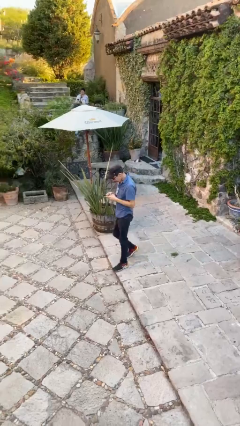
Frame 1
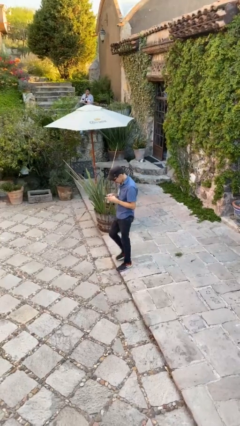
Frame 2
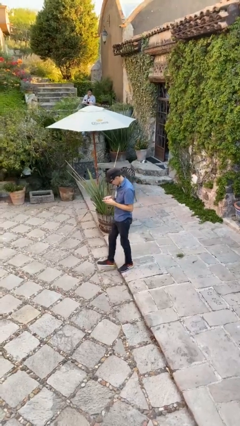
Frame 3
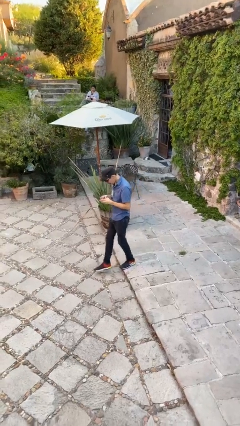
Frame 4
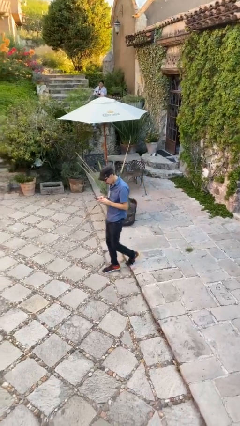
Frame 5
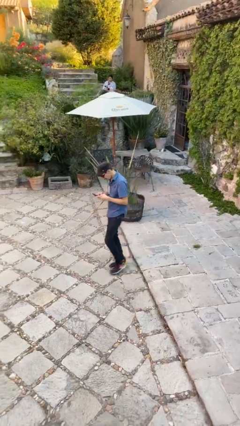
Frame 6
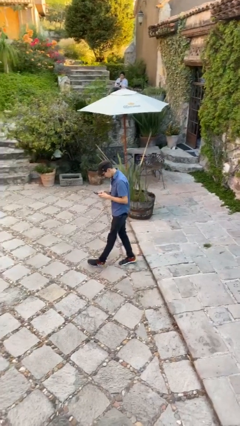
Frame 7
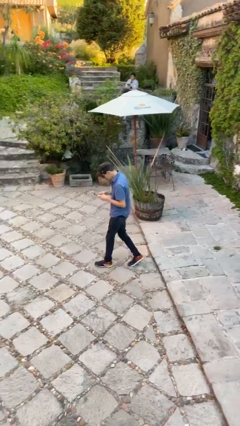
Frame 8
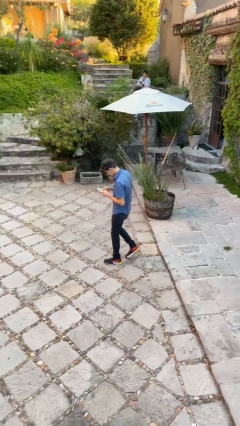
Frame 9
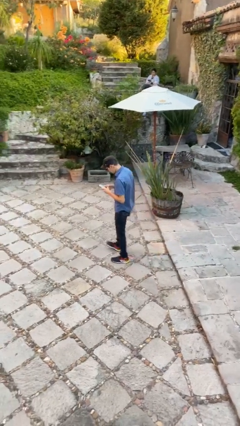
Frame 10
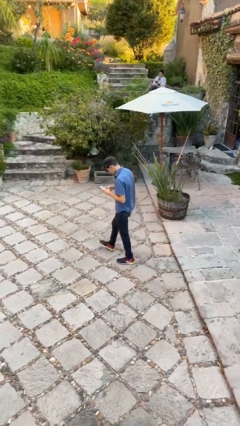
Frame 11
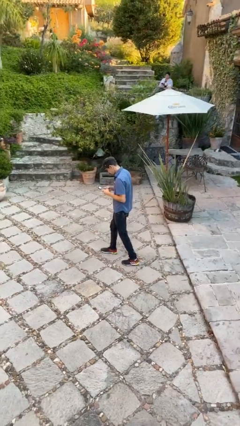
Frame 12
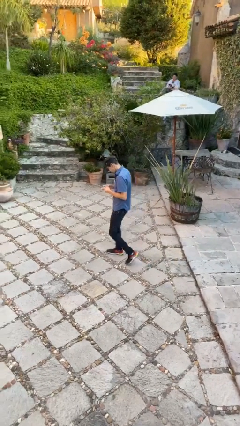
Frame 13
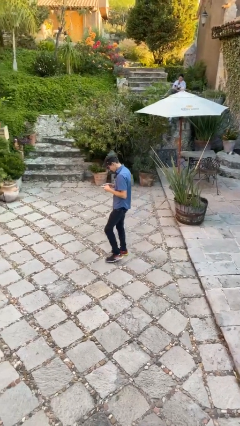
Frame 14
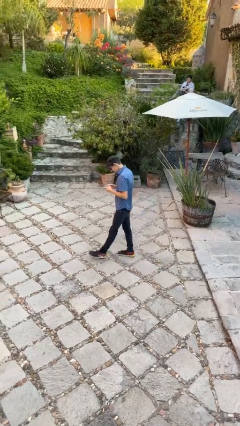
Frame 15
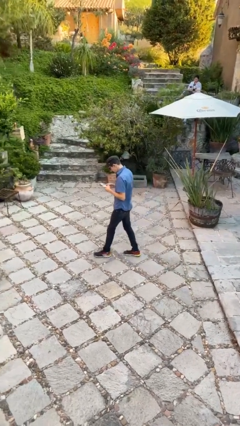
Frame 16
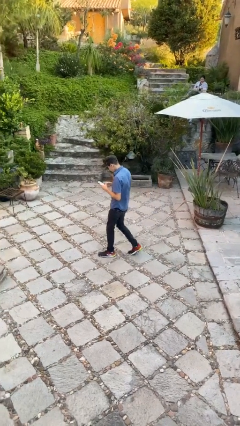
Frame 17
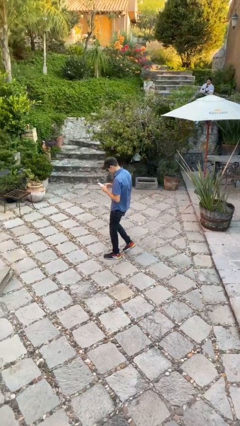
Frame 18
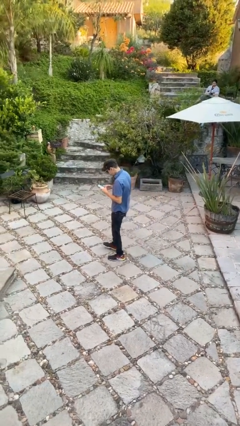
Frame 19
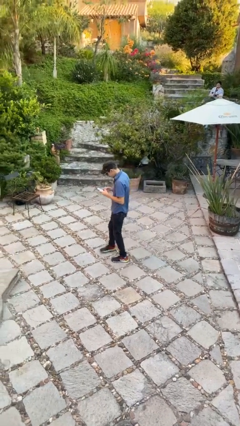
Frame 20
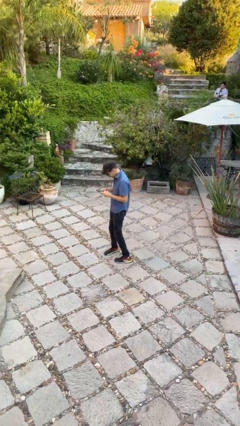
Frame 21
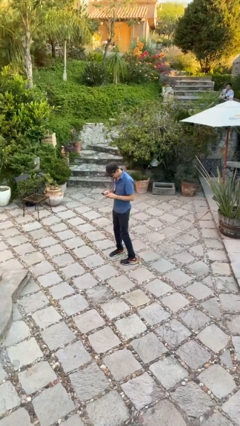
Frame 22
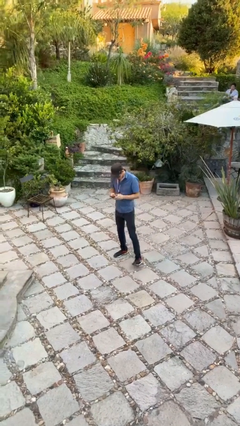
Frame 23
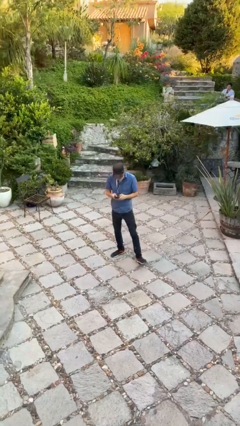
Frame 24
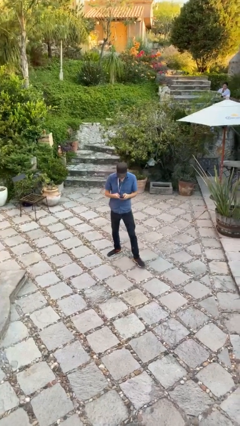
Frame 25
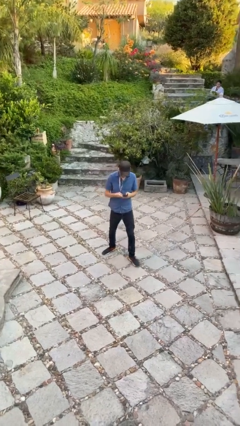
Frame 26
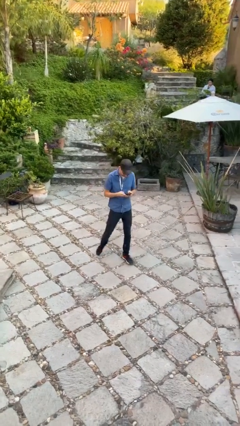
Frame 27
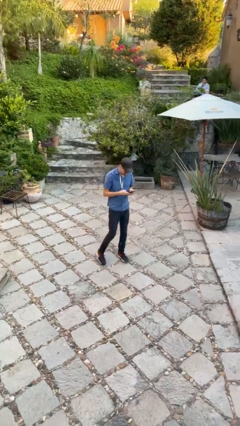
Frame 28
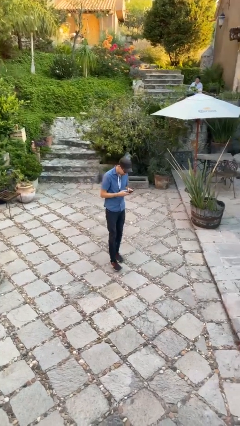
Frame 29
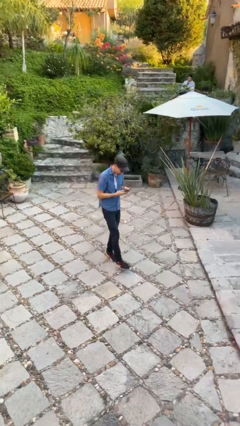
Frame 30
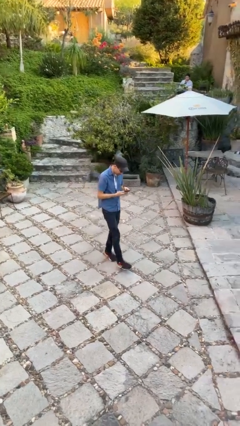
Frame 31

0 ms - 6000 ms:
person texts on phone

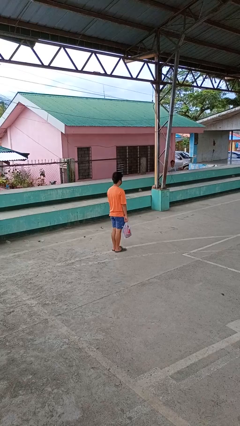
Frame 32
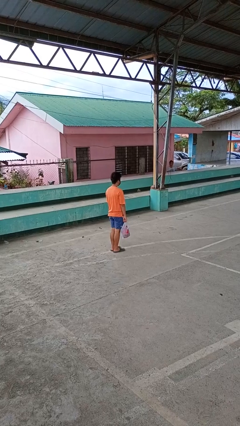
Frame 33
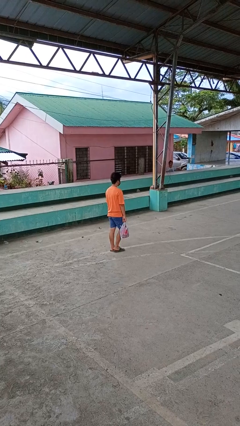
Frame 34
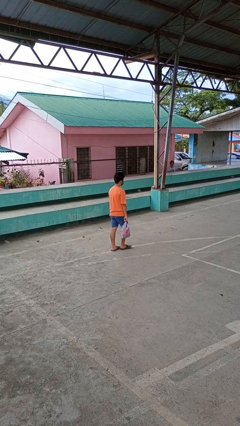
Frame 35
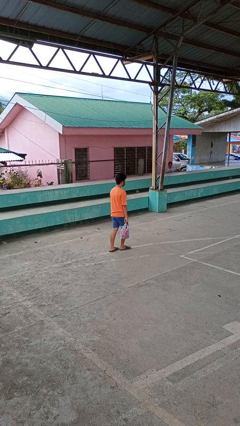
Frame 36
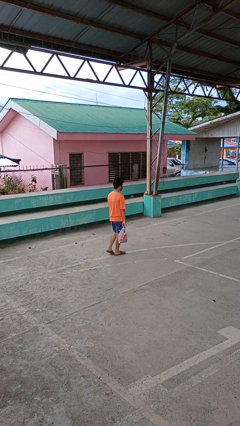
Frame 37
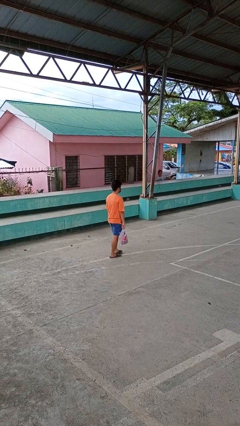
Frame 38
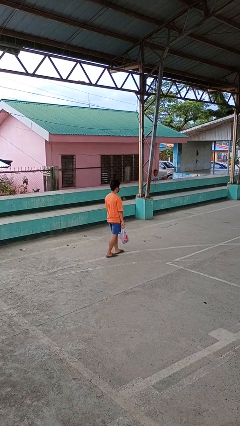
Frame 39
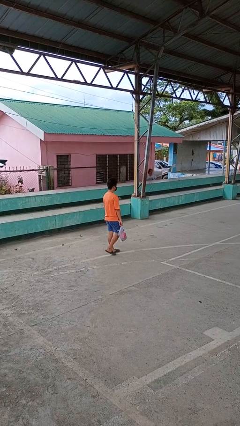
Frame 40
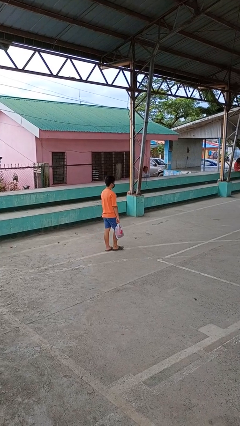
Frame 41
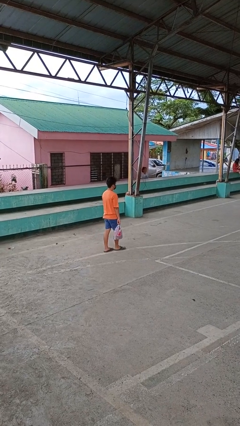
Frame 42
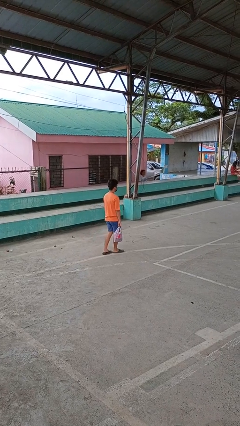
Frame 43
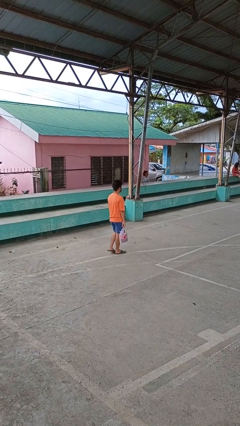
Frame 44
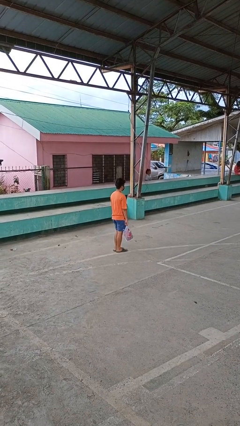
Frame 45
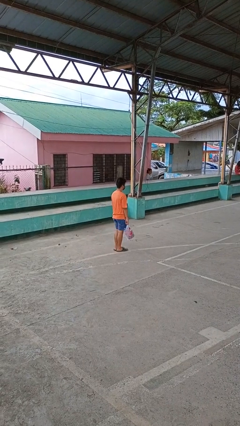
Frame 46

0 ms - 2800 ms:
person carries groceries

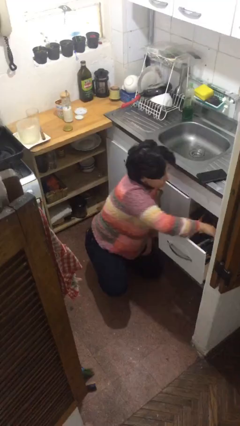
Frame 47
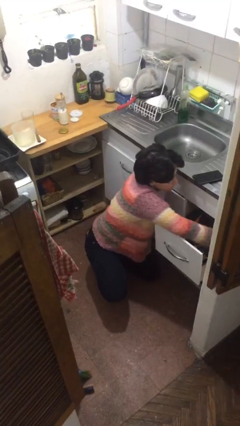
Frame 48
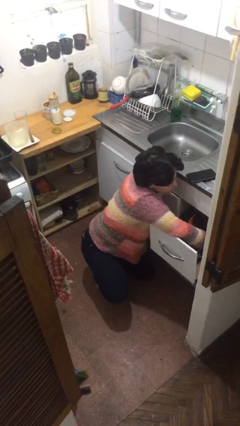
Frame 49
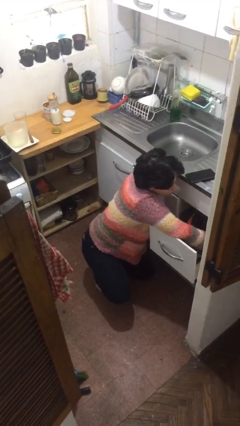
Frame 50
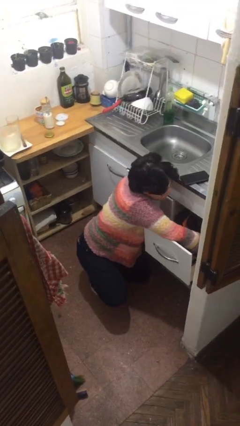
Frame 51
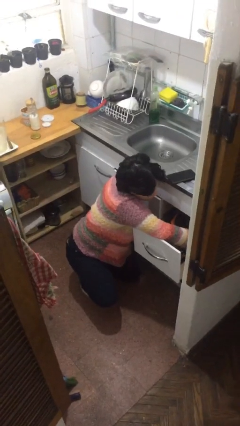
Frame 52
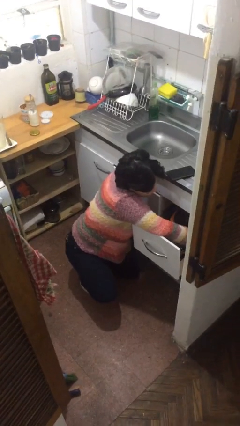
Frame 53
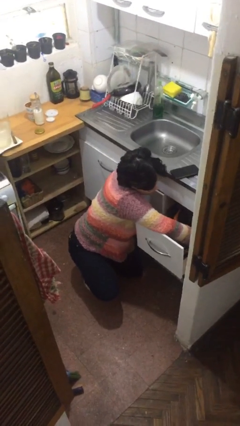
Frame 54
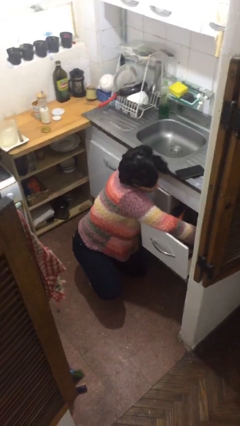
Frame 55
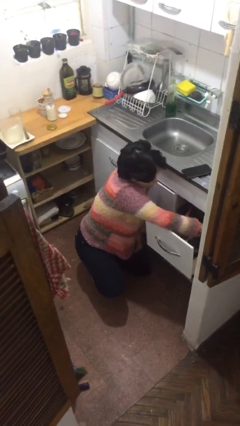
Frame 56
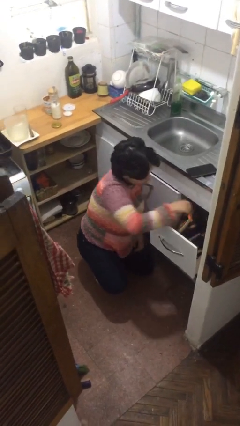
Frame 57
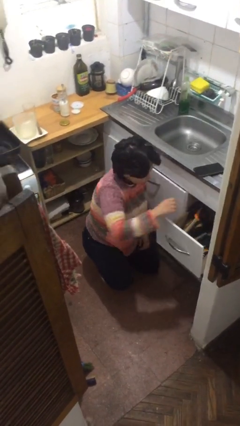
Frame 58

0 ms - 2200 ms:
person searches in kitchen drawer

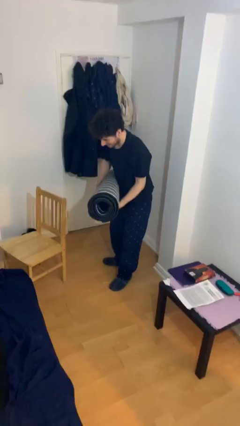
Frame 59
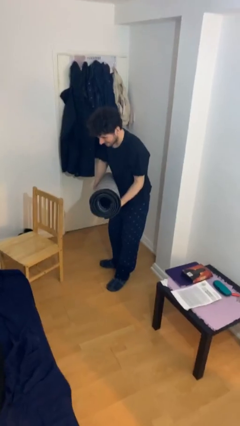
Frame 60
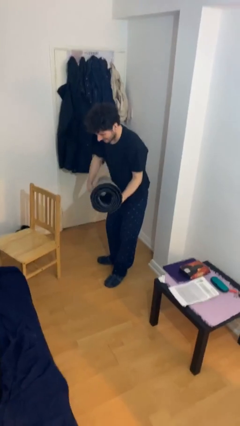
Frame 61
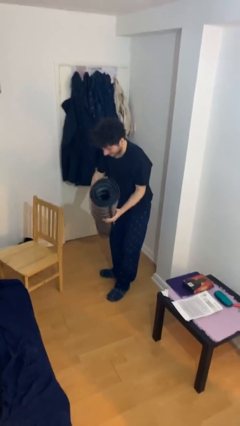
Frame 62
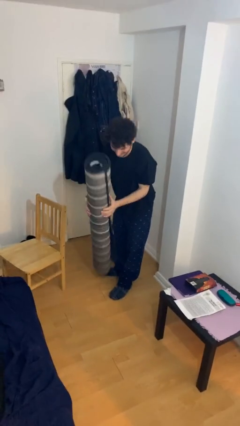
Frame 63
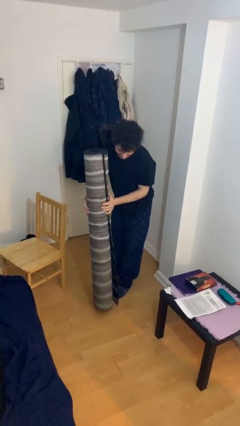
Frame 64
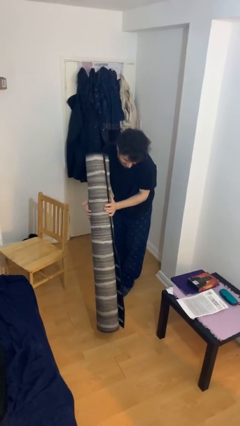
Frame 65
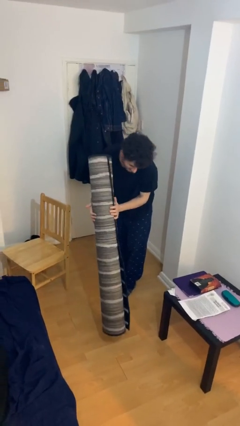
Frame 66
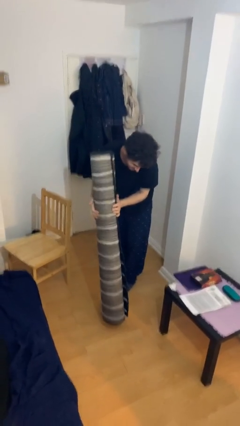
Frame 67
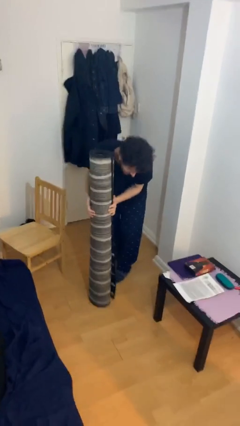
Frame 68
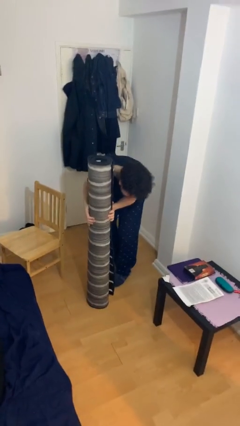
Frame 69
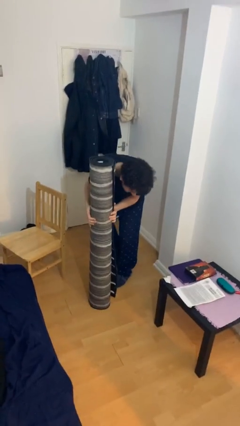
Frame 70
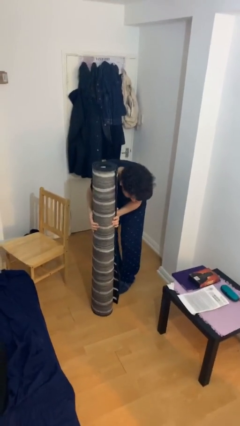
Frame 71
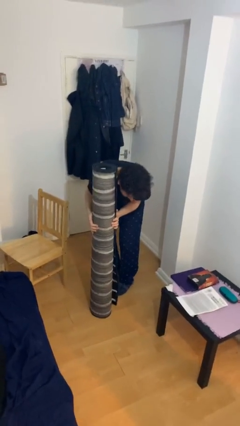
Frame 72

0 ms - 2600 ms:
person puts down object on floor

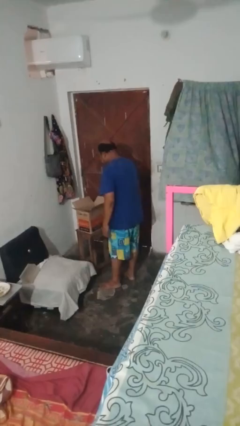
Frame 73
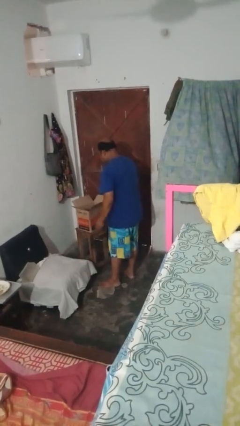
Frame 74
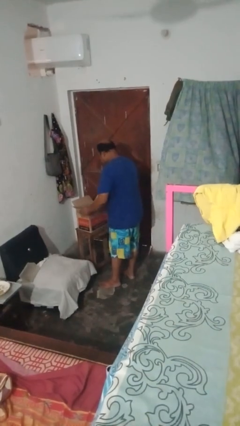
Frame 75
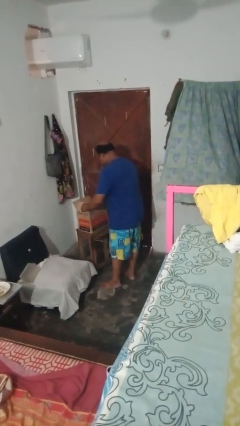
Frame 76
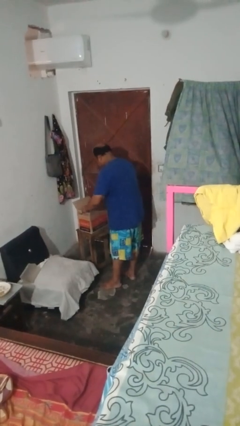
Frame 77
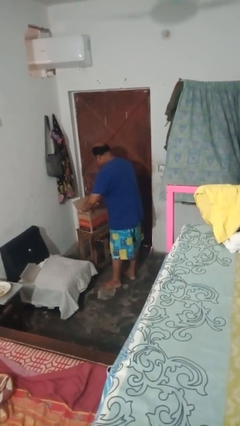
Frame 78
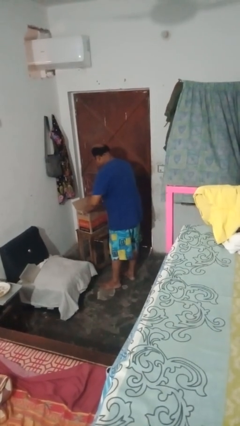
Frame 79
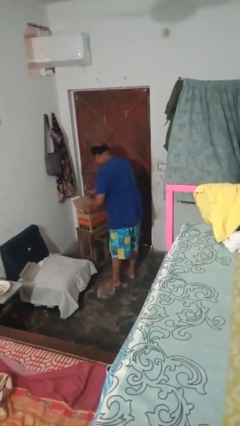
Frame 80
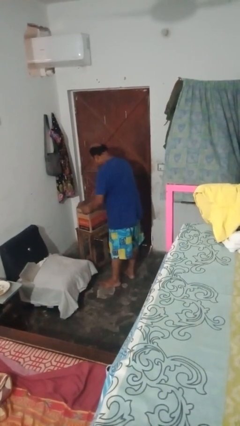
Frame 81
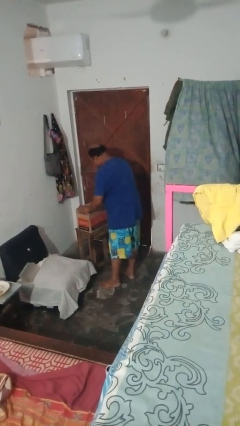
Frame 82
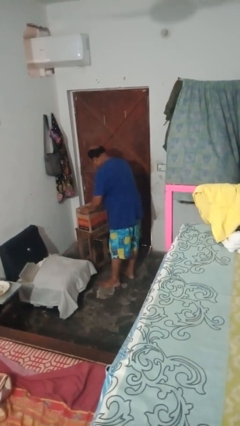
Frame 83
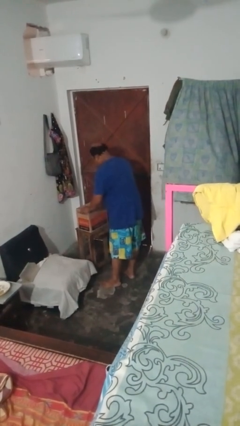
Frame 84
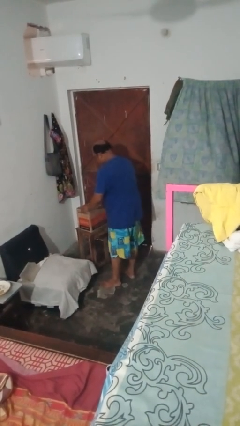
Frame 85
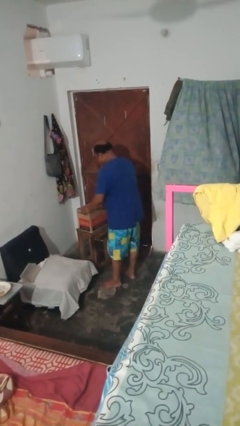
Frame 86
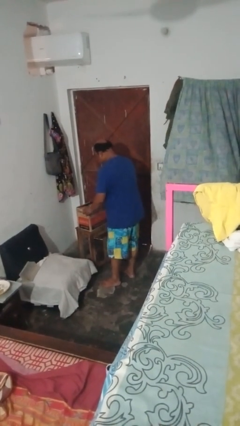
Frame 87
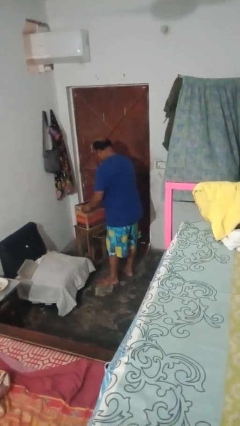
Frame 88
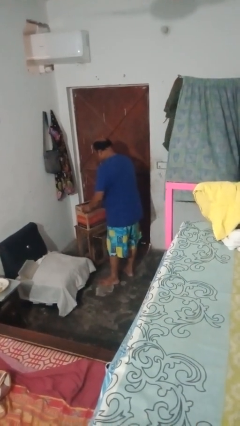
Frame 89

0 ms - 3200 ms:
person closes box

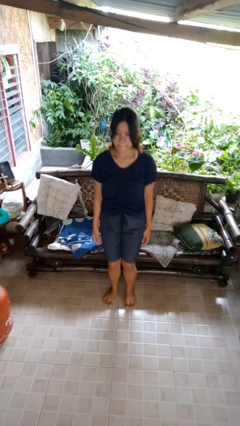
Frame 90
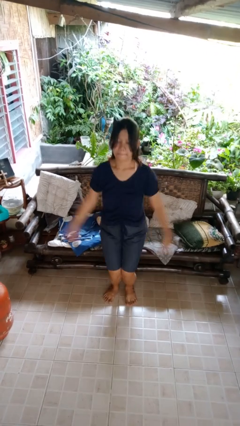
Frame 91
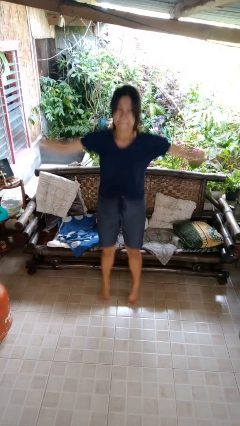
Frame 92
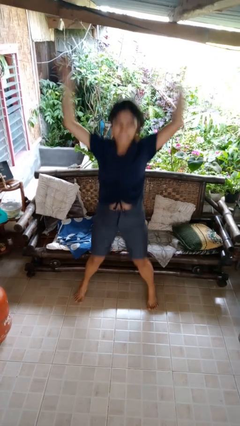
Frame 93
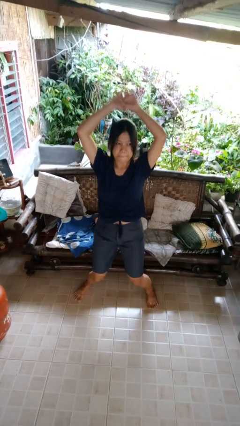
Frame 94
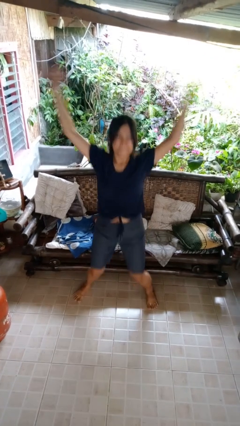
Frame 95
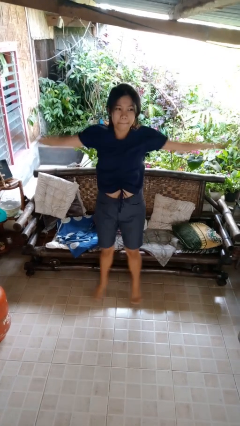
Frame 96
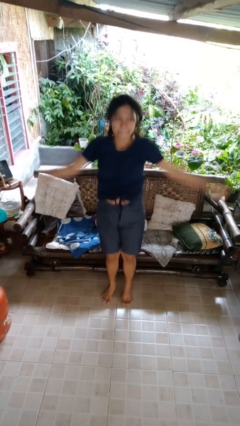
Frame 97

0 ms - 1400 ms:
person exercises with jumping jacks
